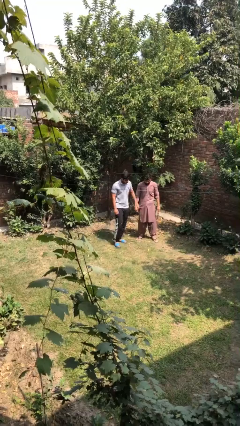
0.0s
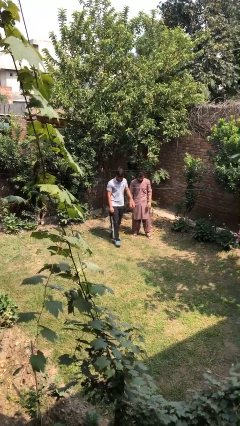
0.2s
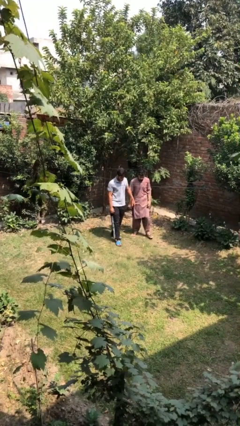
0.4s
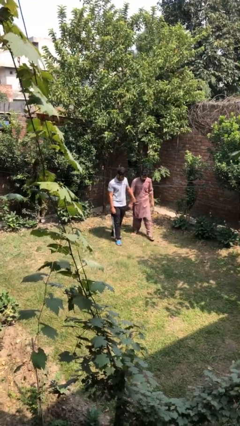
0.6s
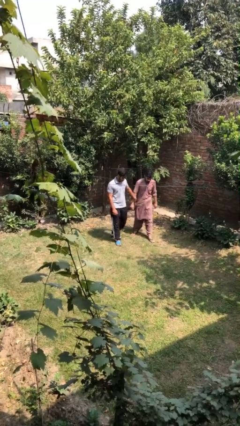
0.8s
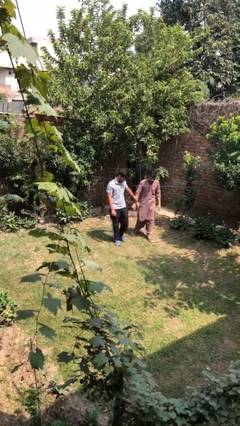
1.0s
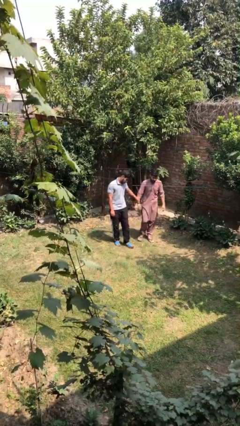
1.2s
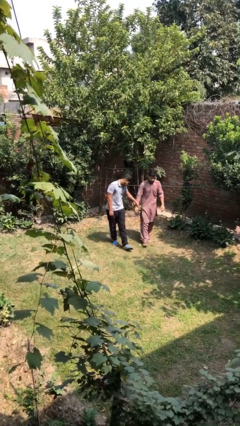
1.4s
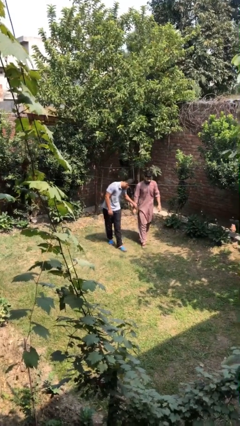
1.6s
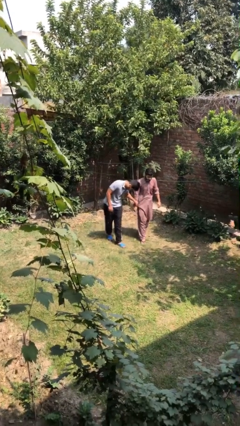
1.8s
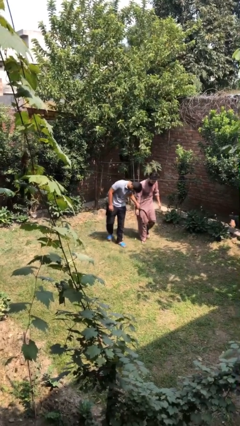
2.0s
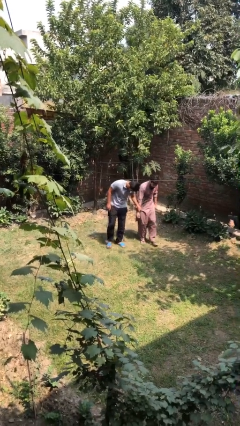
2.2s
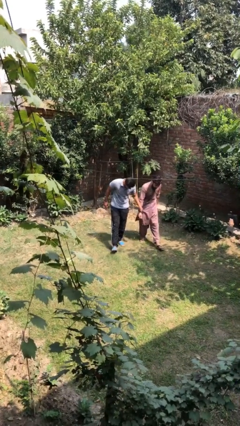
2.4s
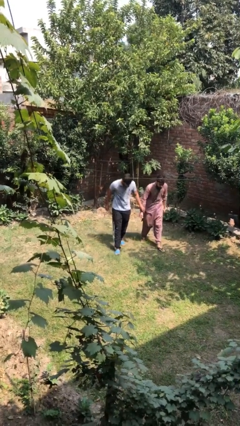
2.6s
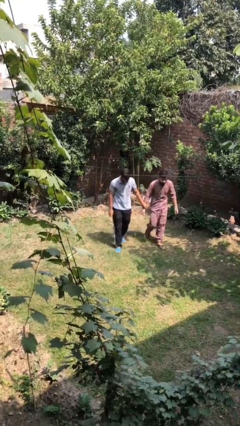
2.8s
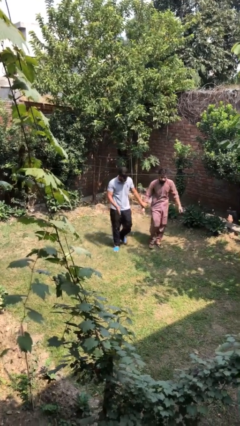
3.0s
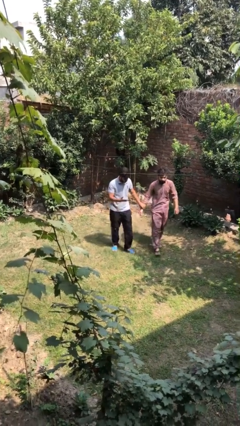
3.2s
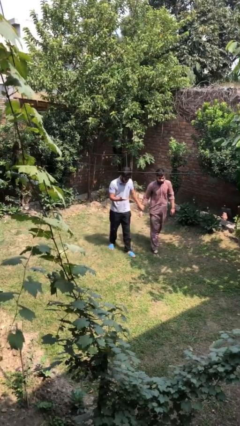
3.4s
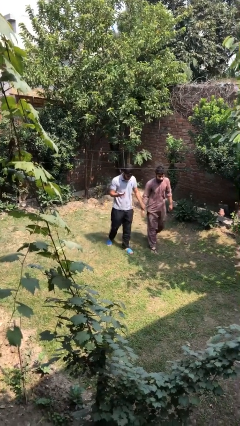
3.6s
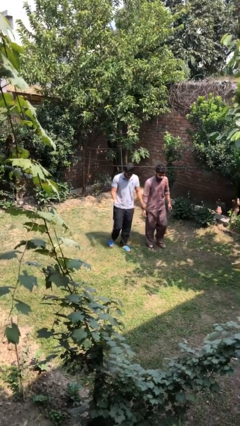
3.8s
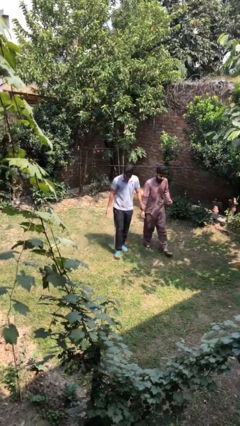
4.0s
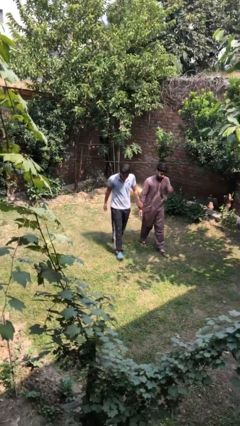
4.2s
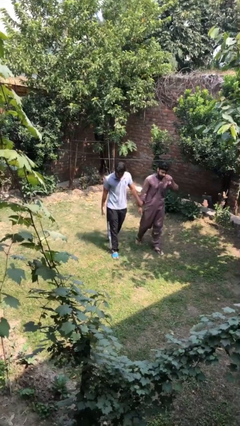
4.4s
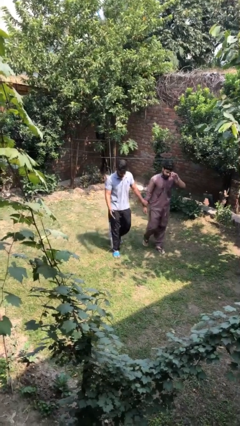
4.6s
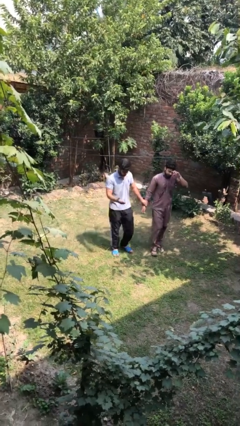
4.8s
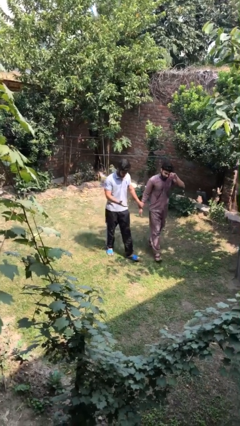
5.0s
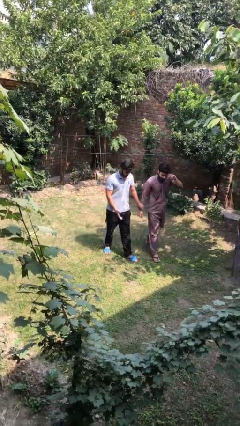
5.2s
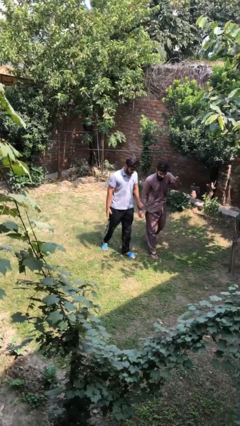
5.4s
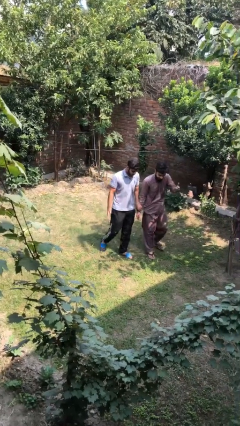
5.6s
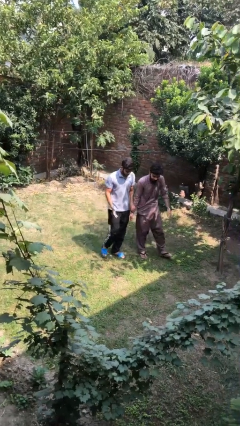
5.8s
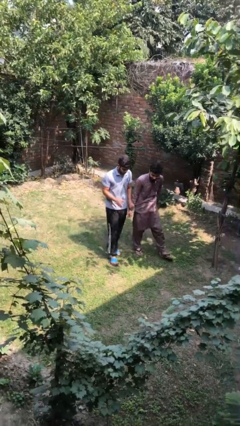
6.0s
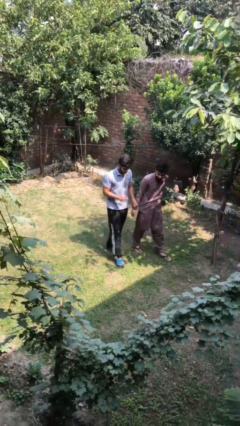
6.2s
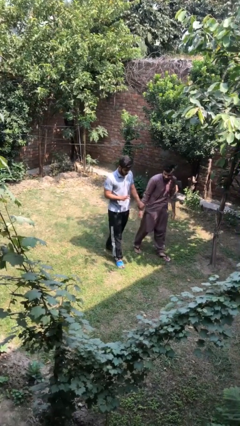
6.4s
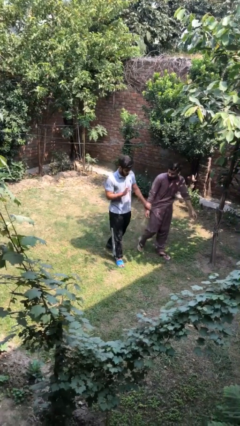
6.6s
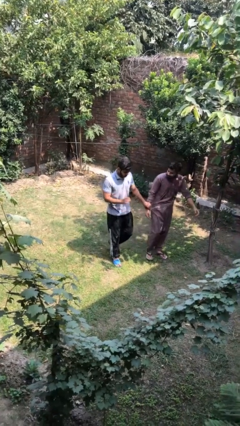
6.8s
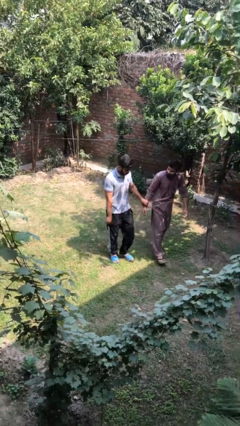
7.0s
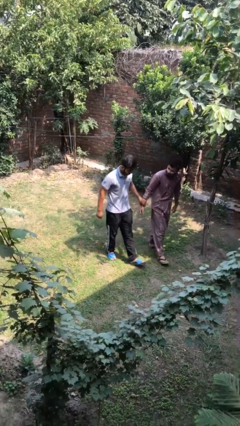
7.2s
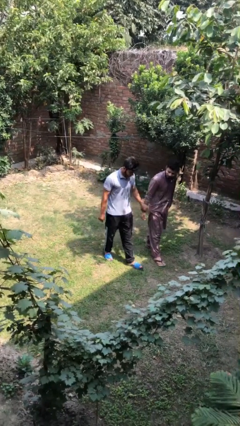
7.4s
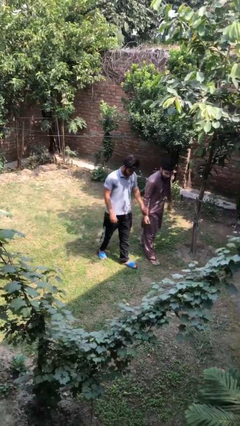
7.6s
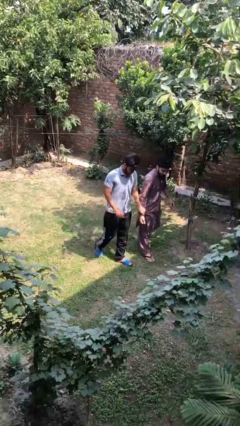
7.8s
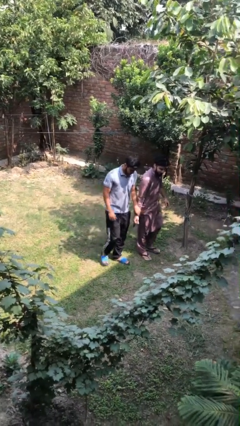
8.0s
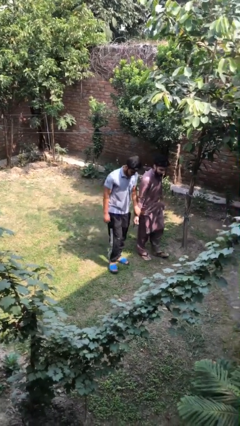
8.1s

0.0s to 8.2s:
person holds hand

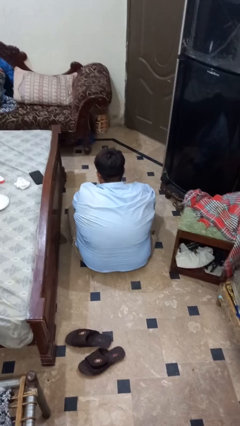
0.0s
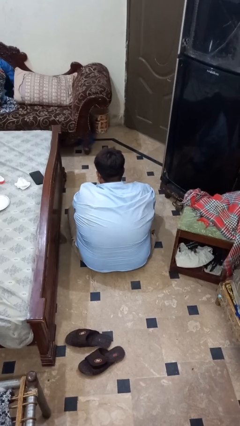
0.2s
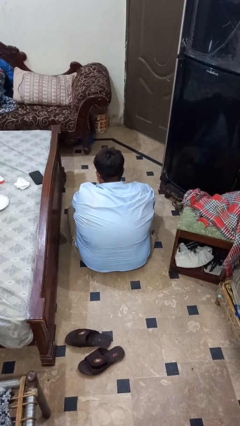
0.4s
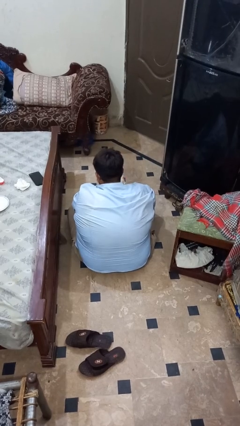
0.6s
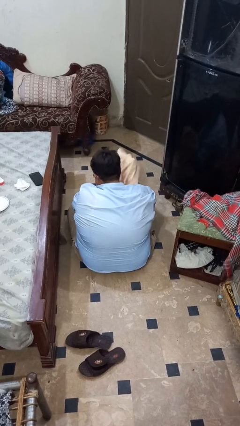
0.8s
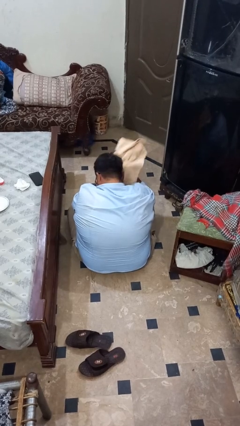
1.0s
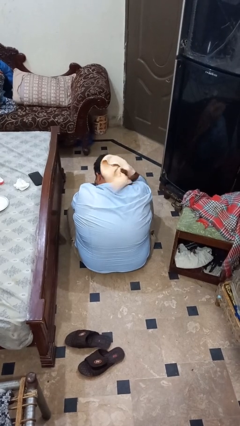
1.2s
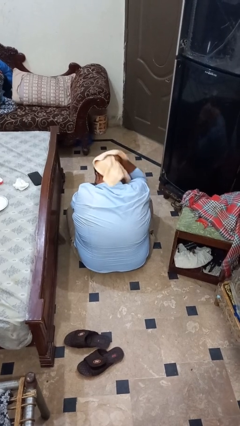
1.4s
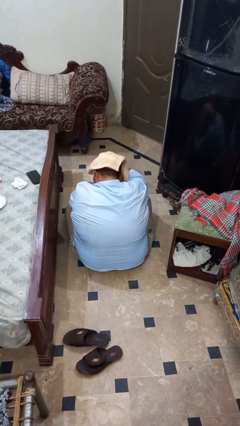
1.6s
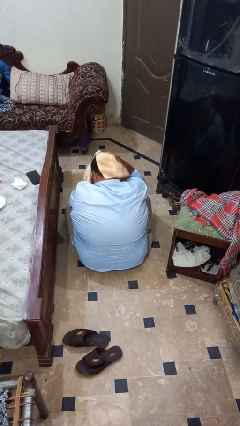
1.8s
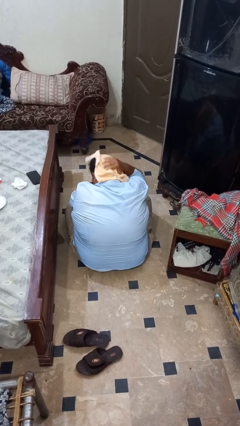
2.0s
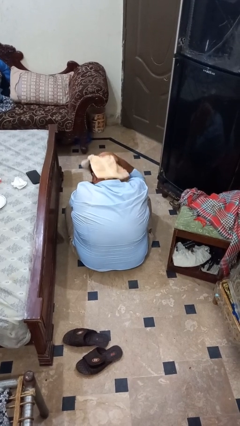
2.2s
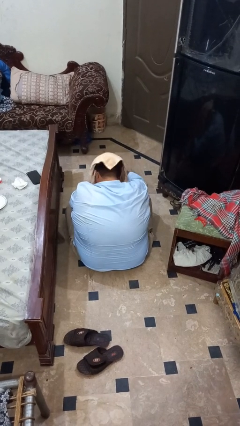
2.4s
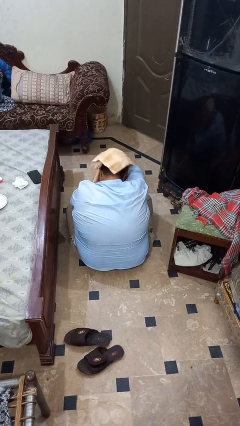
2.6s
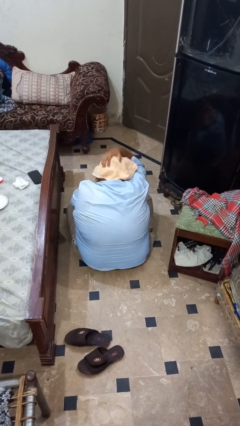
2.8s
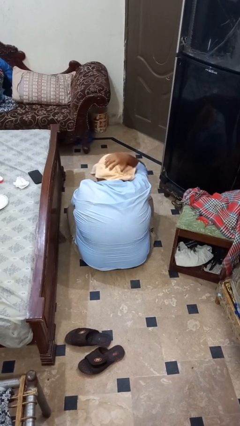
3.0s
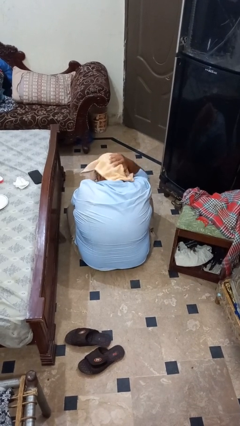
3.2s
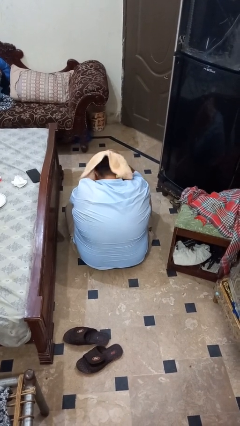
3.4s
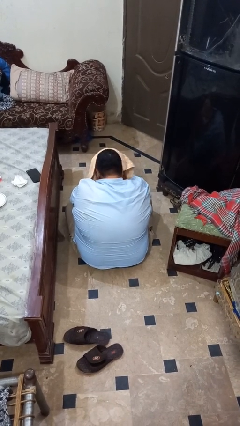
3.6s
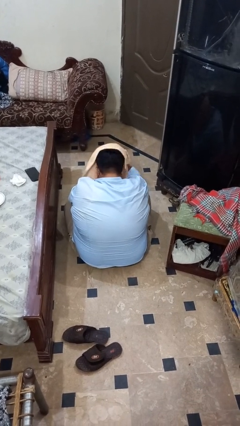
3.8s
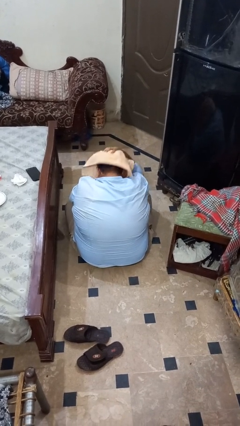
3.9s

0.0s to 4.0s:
person dries hair with towel

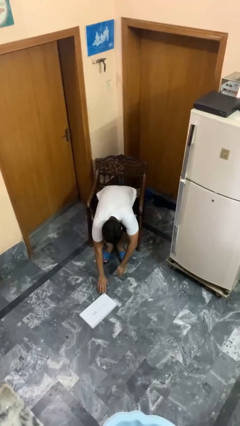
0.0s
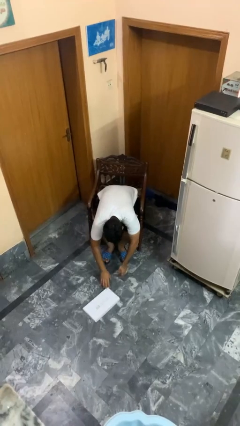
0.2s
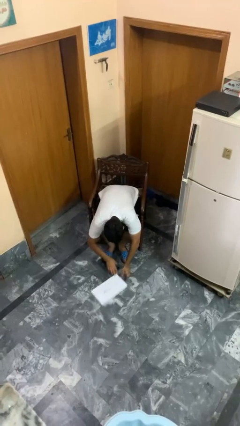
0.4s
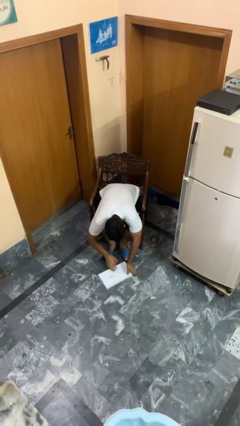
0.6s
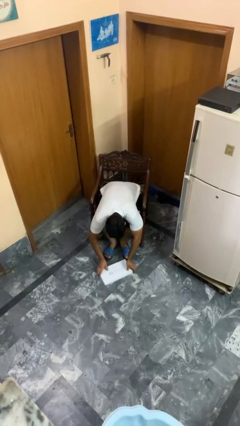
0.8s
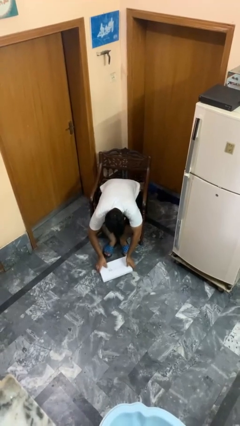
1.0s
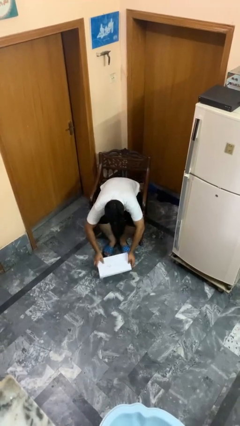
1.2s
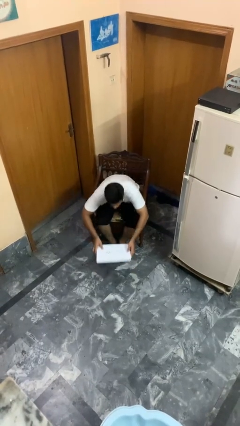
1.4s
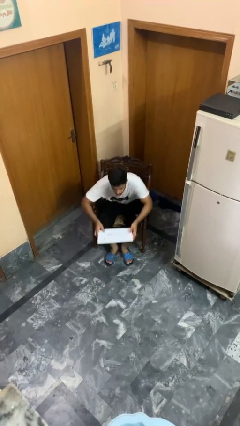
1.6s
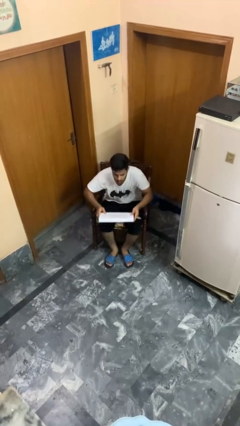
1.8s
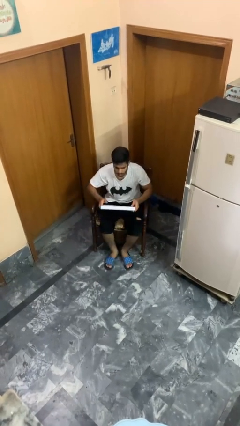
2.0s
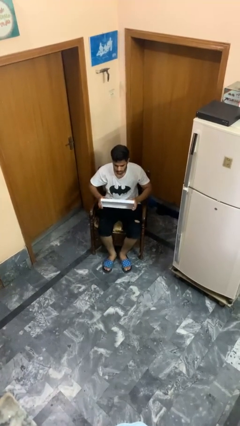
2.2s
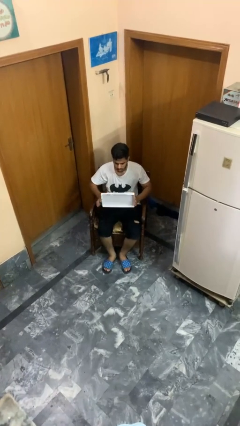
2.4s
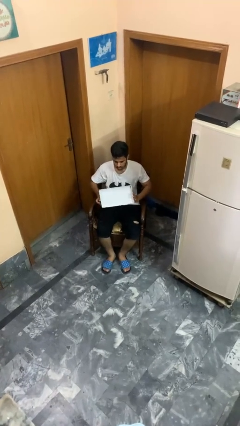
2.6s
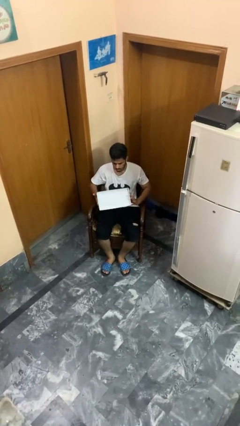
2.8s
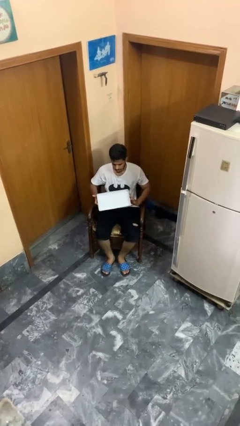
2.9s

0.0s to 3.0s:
person picks up object from floor

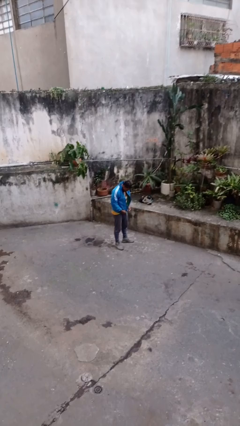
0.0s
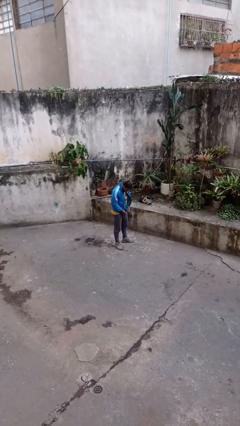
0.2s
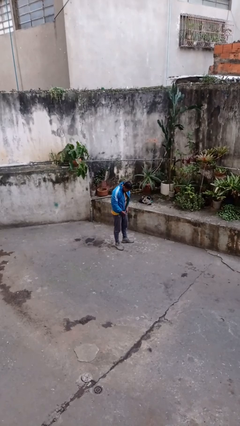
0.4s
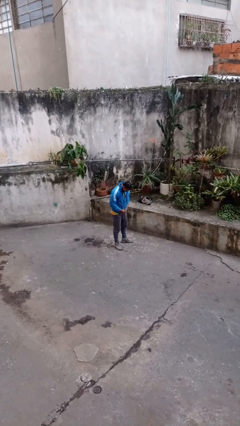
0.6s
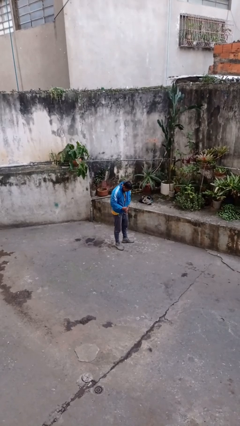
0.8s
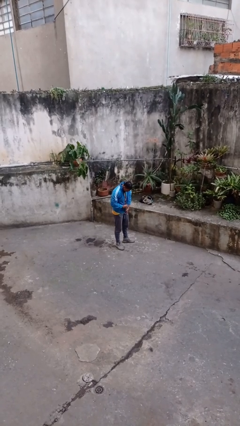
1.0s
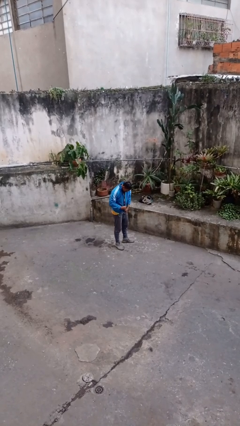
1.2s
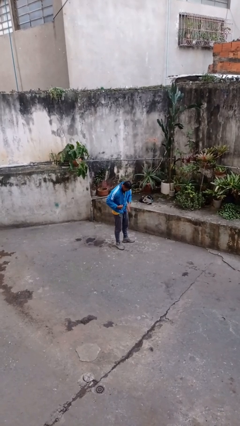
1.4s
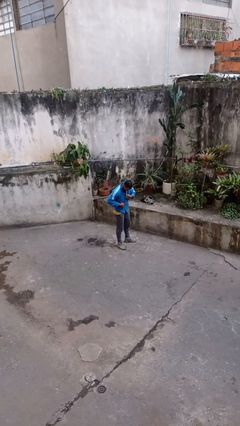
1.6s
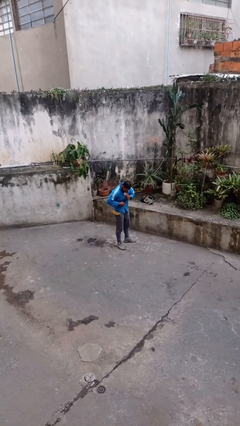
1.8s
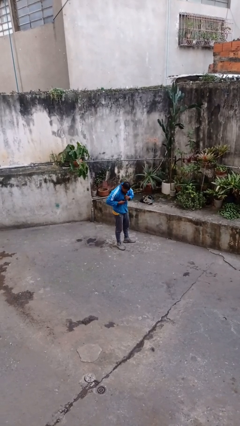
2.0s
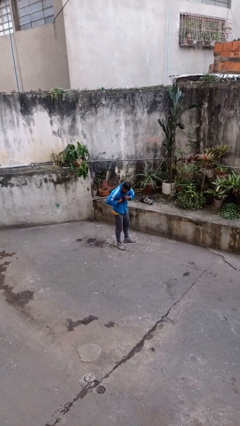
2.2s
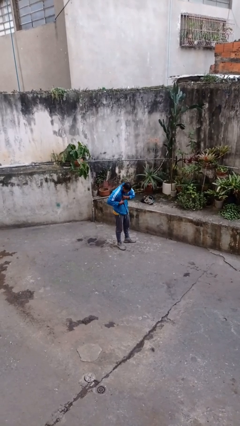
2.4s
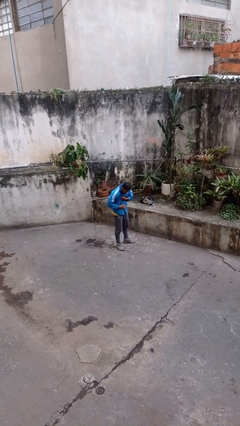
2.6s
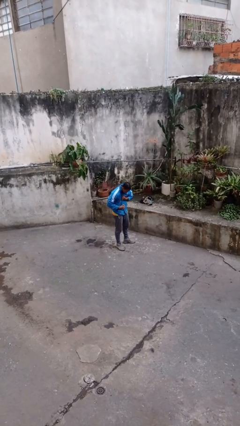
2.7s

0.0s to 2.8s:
person zips up jacket
